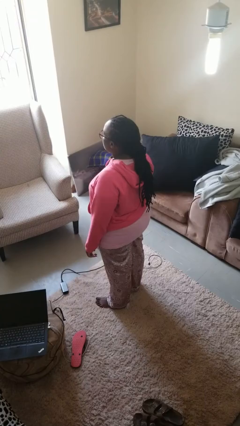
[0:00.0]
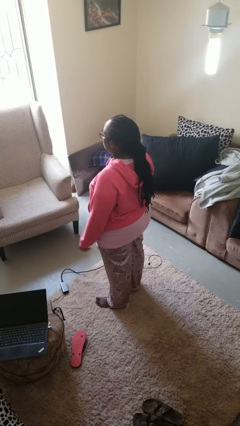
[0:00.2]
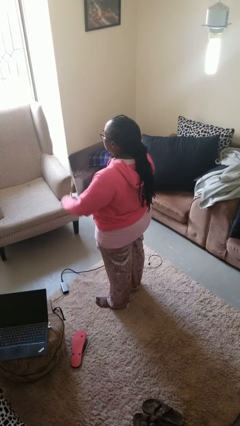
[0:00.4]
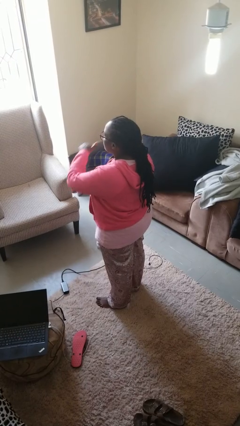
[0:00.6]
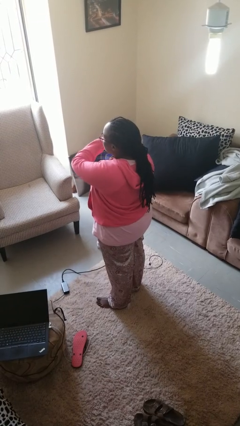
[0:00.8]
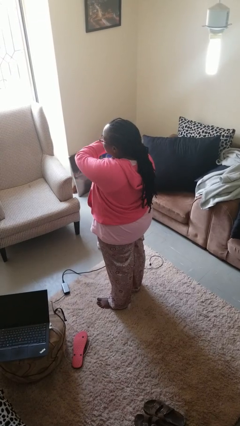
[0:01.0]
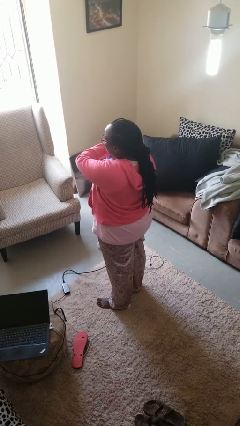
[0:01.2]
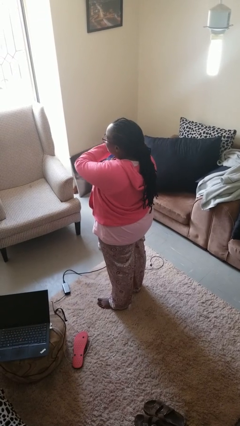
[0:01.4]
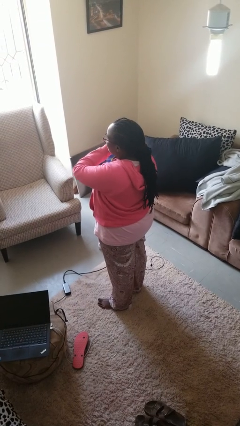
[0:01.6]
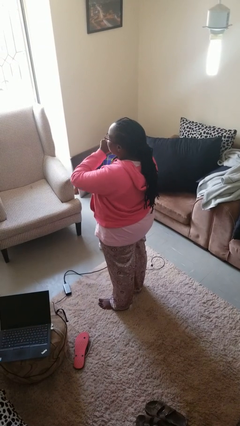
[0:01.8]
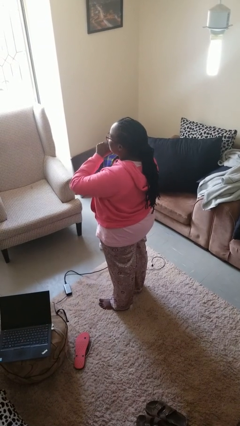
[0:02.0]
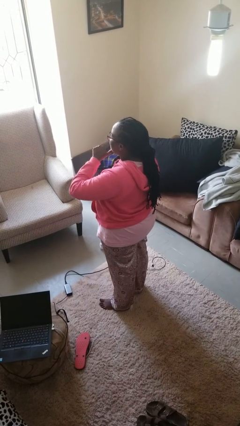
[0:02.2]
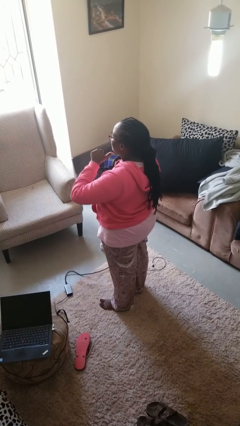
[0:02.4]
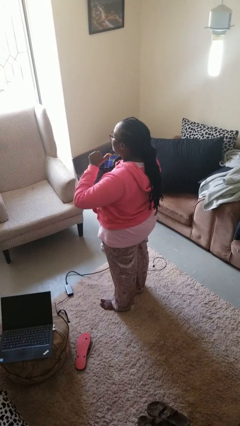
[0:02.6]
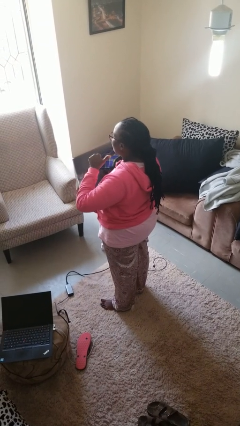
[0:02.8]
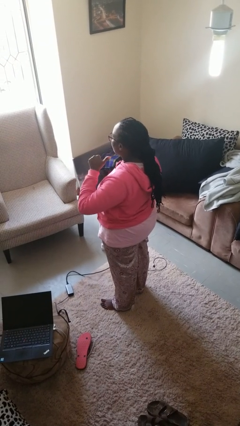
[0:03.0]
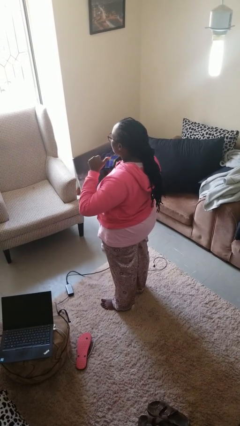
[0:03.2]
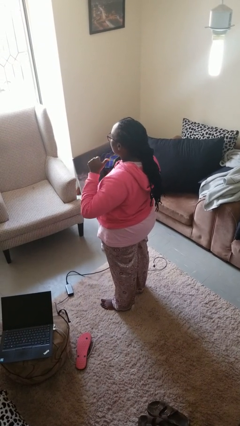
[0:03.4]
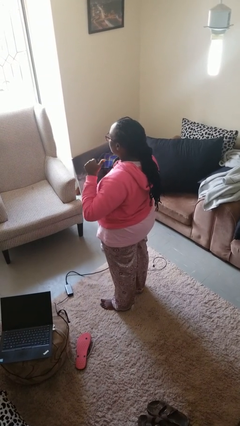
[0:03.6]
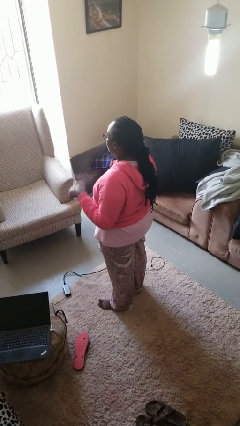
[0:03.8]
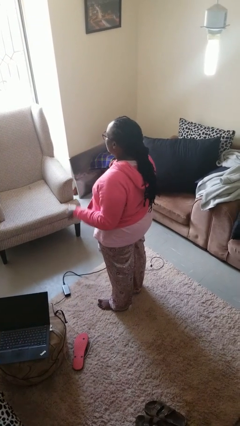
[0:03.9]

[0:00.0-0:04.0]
person gestures cut

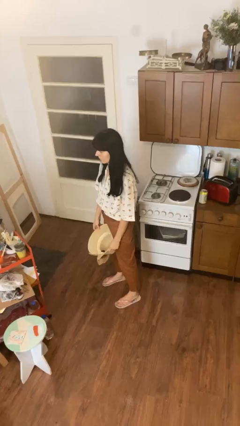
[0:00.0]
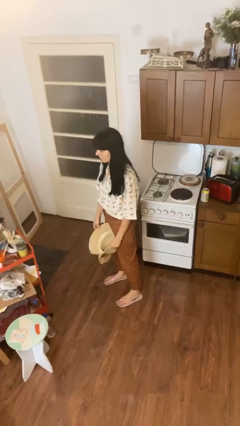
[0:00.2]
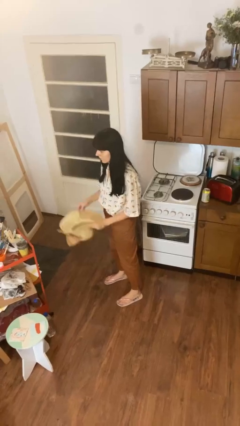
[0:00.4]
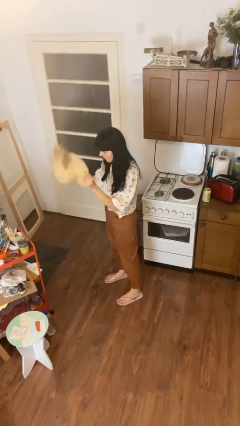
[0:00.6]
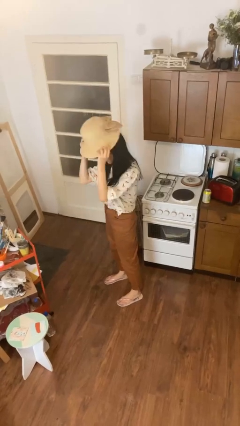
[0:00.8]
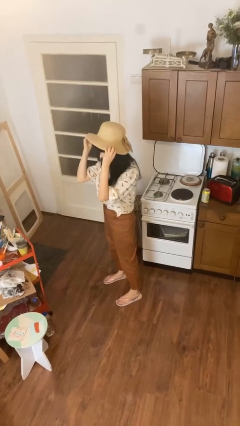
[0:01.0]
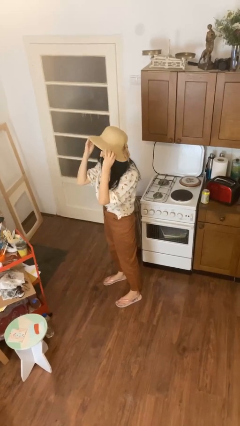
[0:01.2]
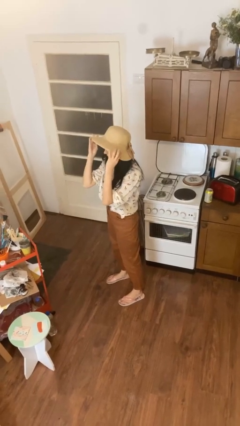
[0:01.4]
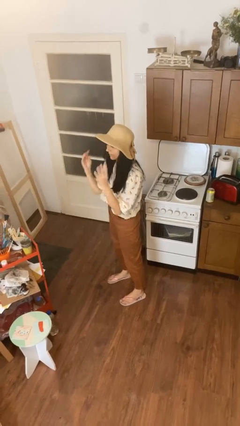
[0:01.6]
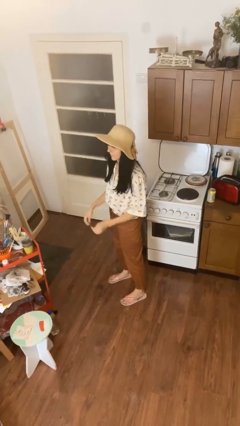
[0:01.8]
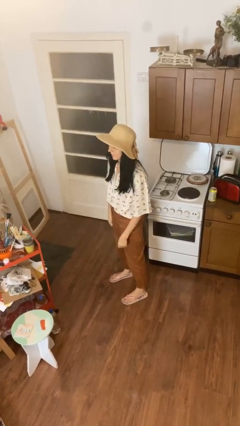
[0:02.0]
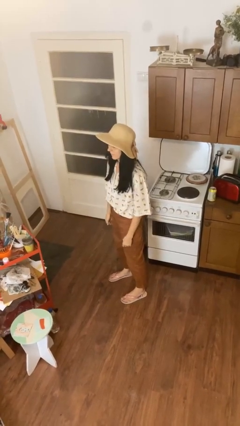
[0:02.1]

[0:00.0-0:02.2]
person puts on hat

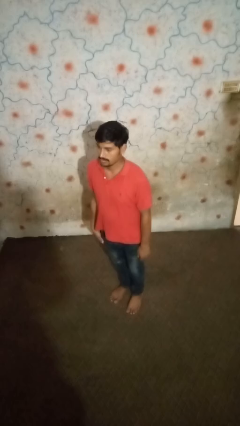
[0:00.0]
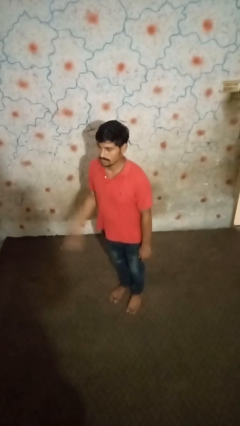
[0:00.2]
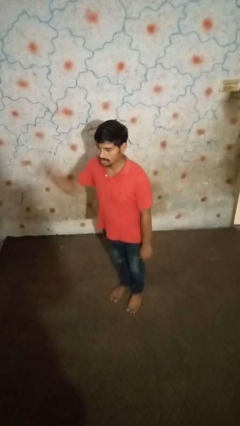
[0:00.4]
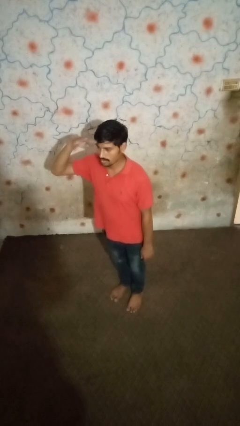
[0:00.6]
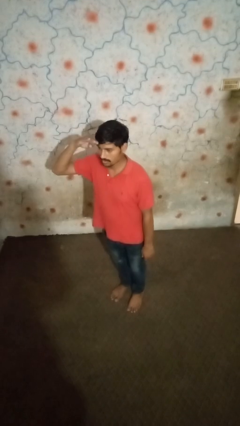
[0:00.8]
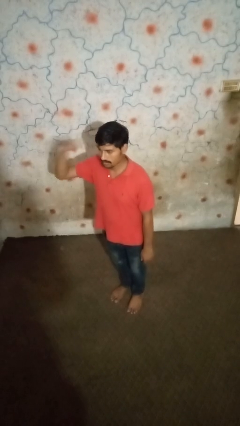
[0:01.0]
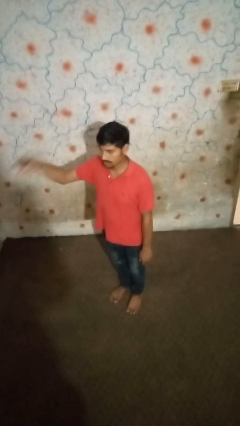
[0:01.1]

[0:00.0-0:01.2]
person salutes

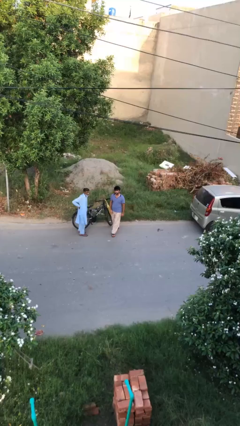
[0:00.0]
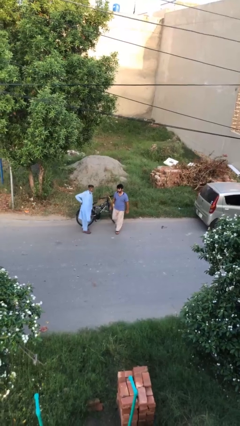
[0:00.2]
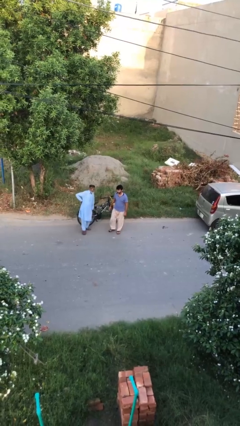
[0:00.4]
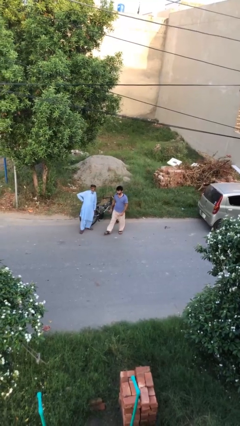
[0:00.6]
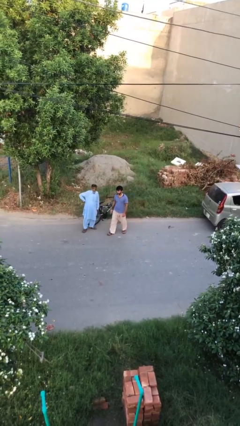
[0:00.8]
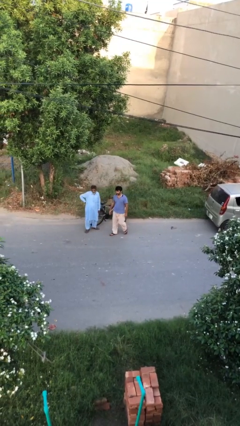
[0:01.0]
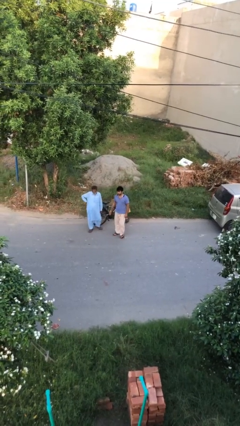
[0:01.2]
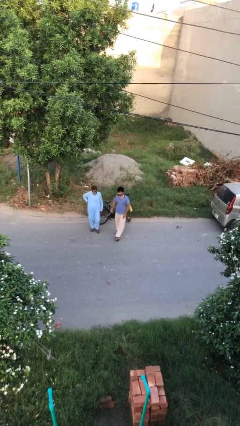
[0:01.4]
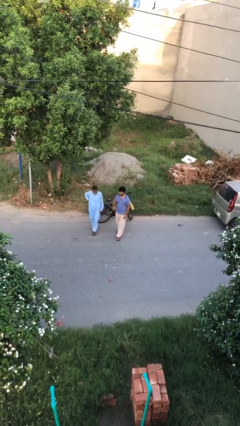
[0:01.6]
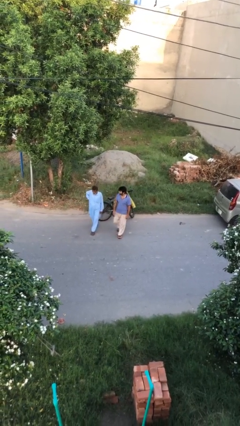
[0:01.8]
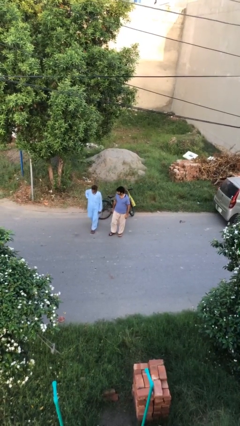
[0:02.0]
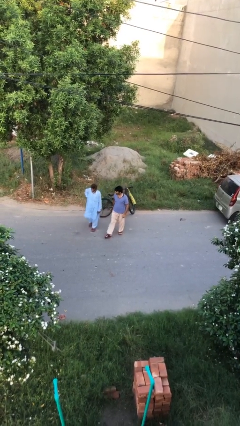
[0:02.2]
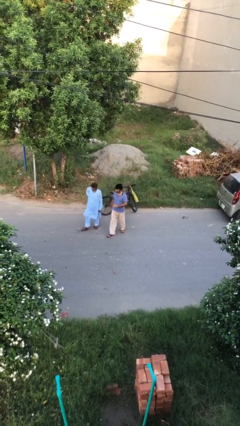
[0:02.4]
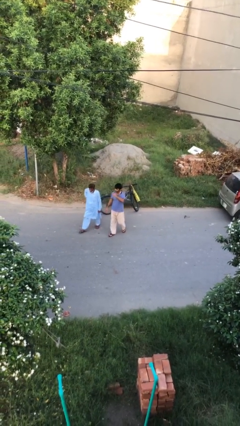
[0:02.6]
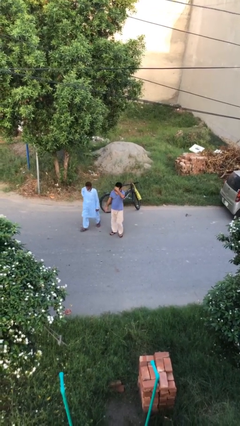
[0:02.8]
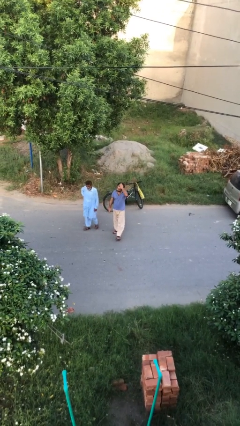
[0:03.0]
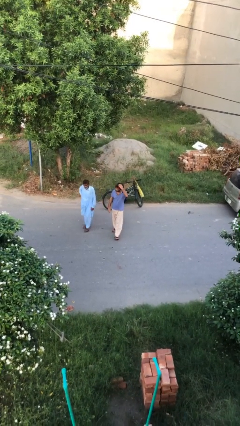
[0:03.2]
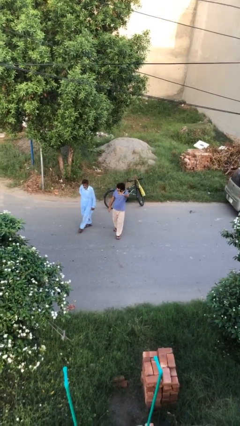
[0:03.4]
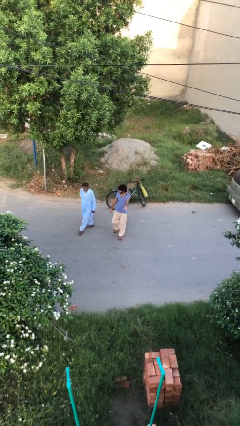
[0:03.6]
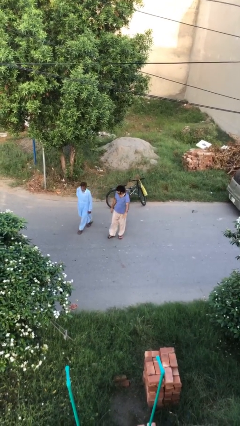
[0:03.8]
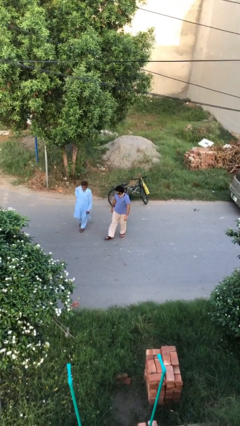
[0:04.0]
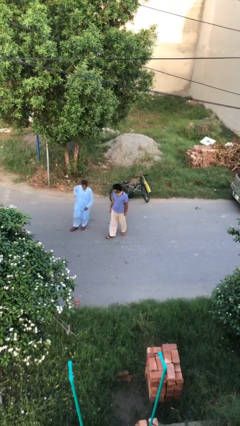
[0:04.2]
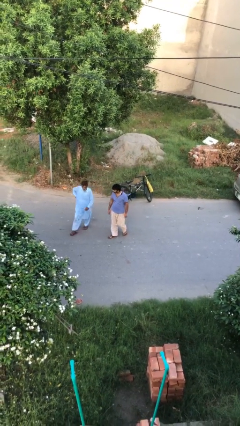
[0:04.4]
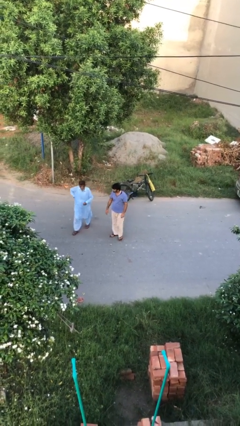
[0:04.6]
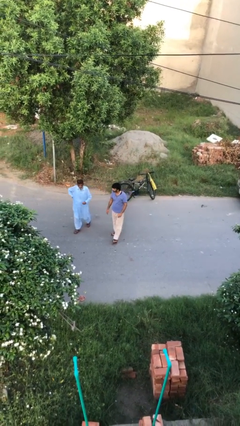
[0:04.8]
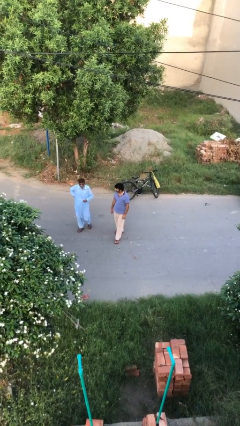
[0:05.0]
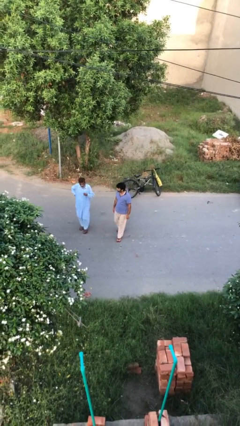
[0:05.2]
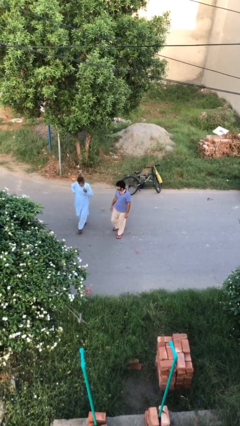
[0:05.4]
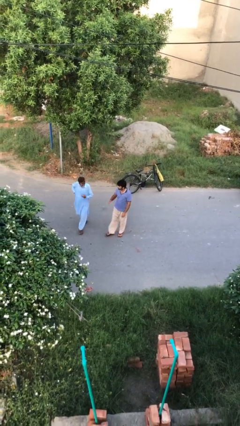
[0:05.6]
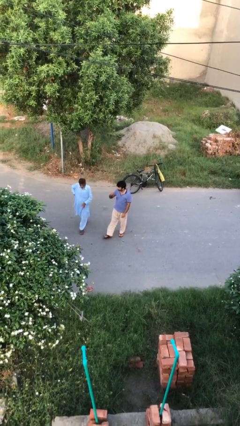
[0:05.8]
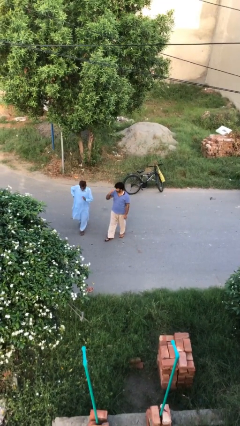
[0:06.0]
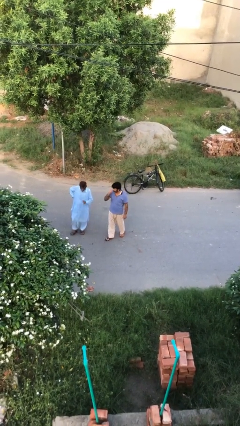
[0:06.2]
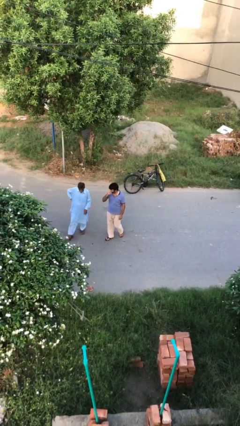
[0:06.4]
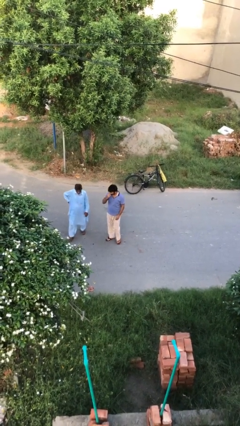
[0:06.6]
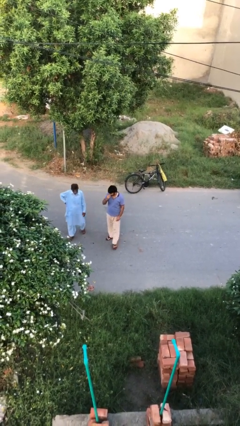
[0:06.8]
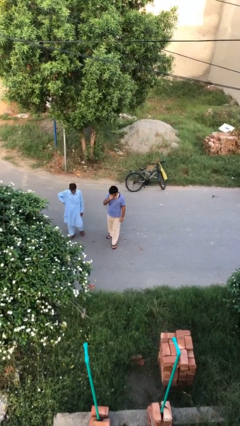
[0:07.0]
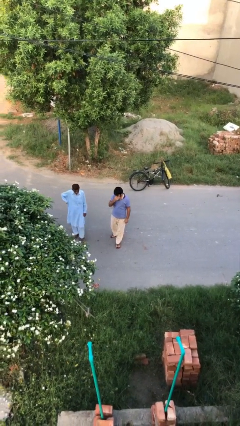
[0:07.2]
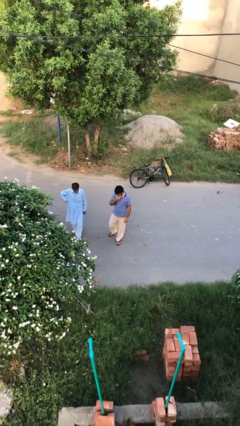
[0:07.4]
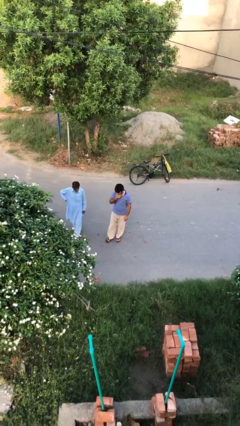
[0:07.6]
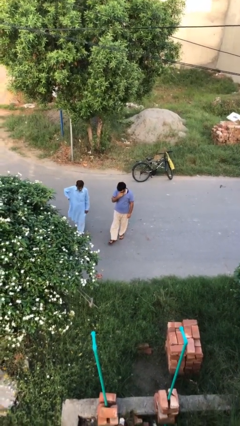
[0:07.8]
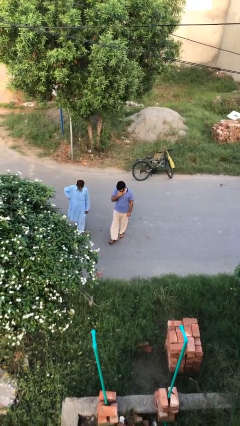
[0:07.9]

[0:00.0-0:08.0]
person talks to person

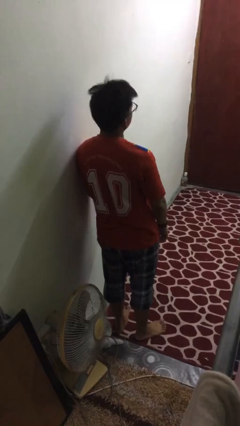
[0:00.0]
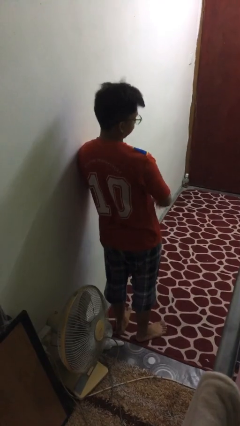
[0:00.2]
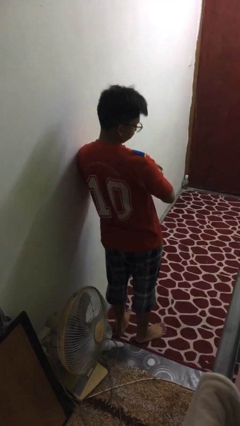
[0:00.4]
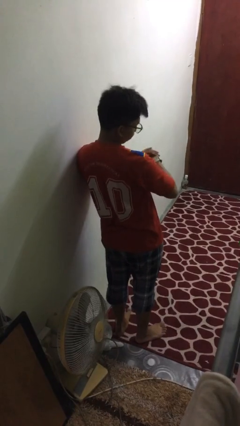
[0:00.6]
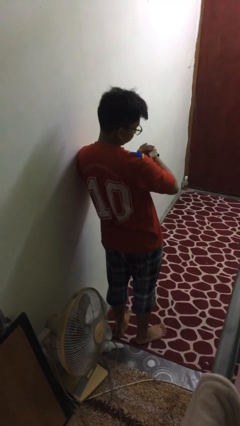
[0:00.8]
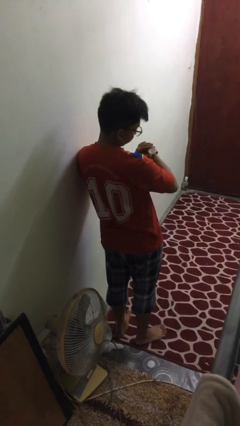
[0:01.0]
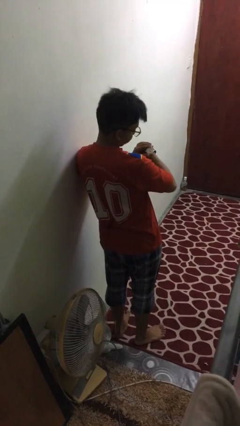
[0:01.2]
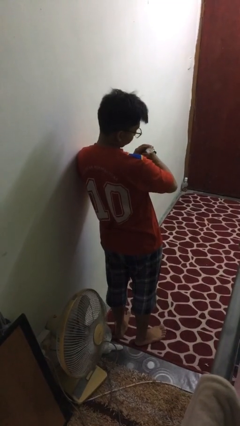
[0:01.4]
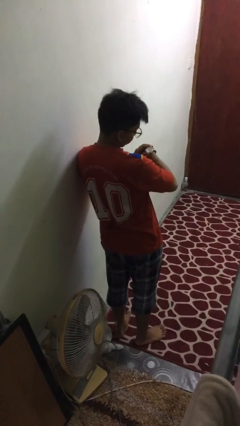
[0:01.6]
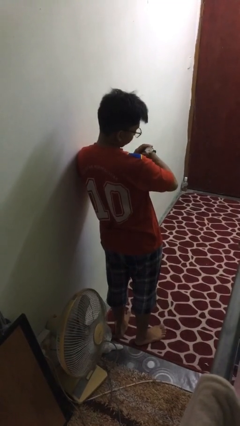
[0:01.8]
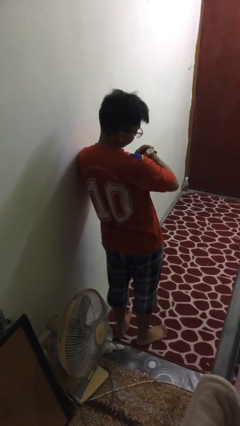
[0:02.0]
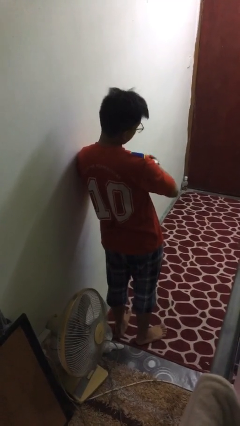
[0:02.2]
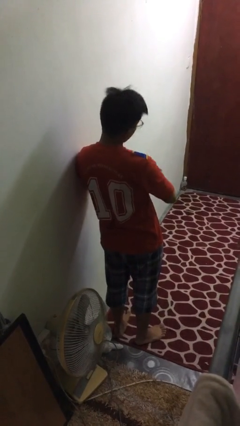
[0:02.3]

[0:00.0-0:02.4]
person looks at wristwatch
